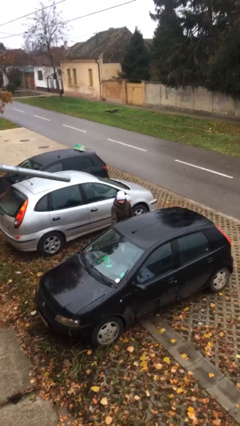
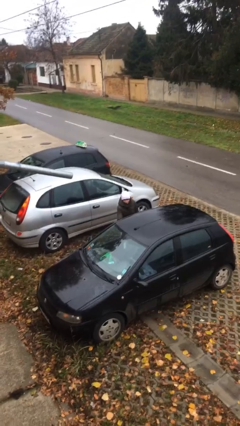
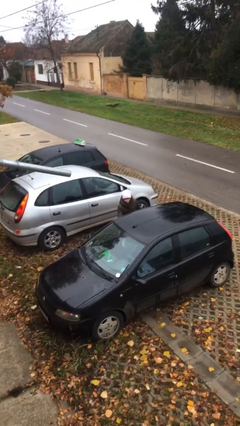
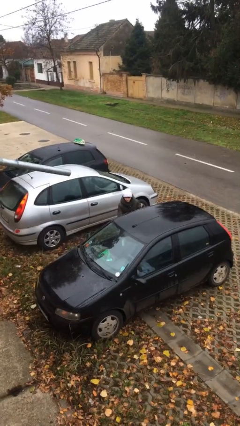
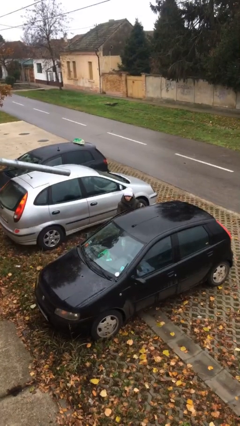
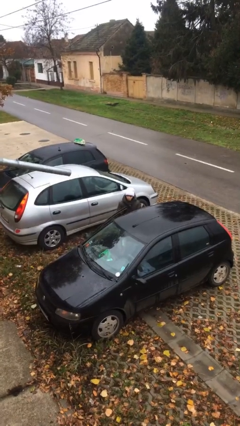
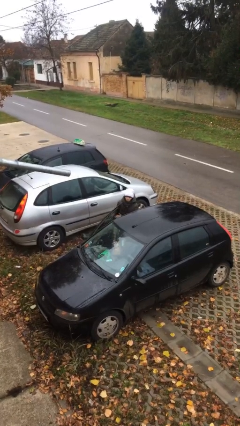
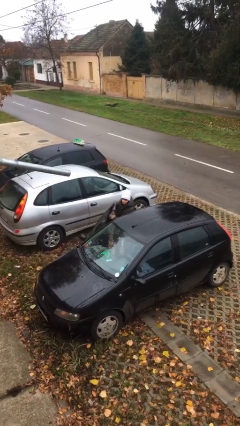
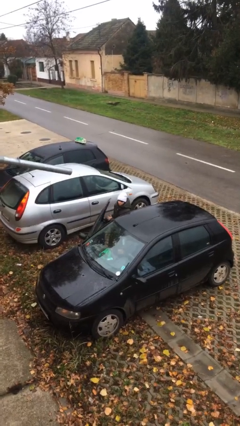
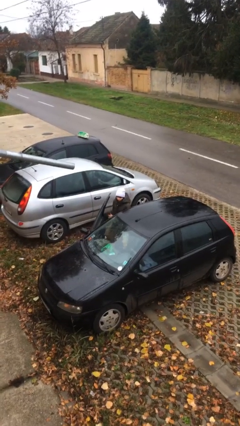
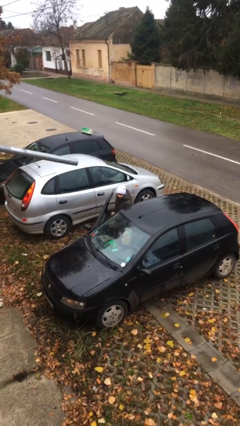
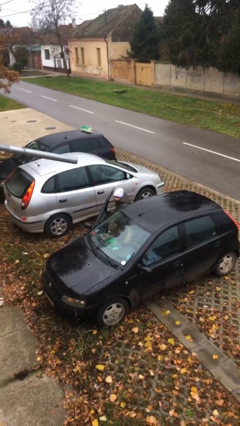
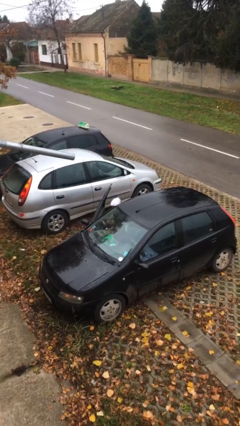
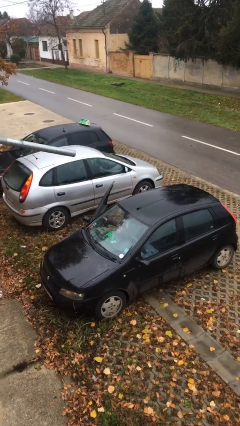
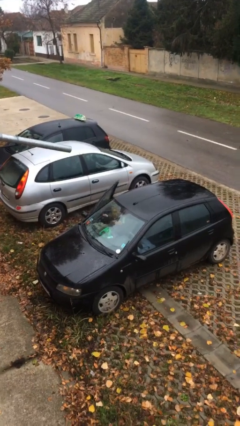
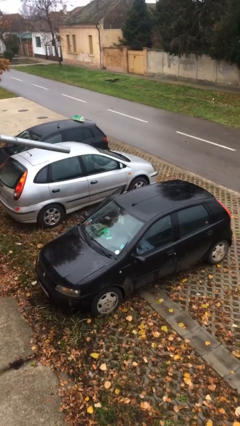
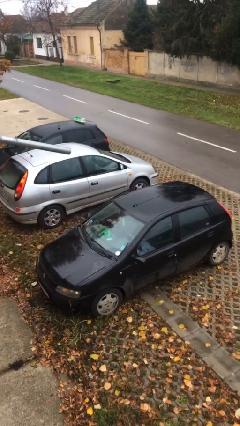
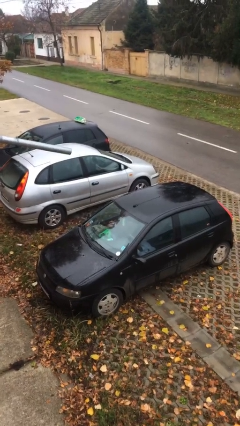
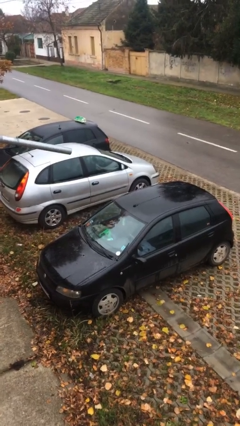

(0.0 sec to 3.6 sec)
person enters car

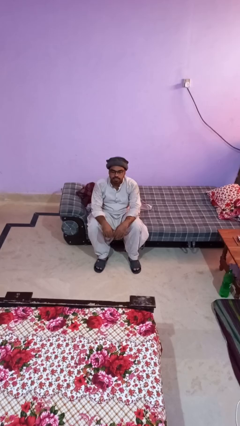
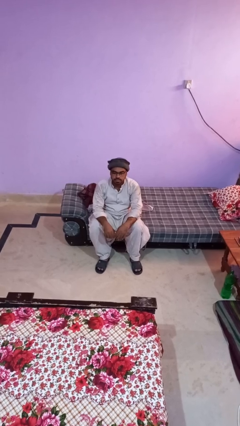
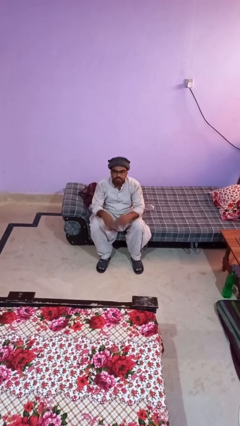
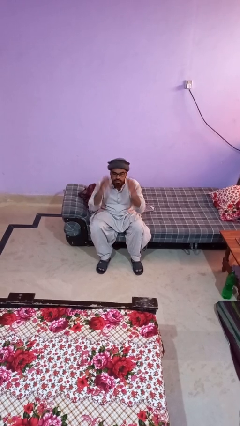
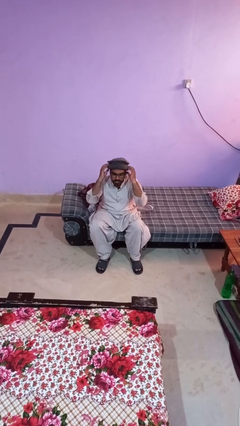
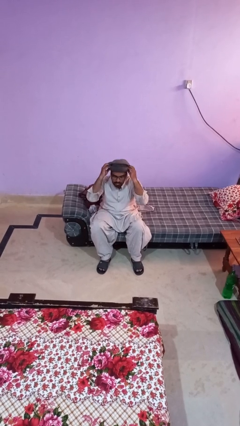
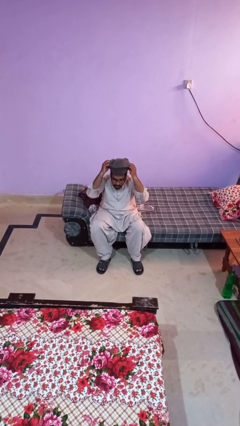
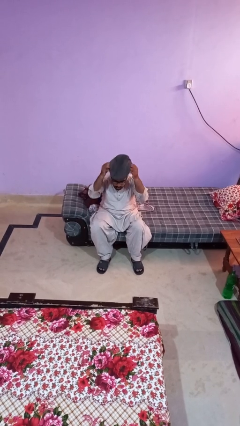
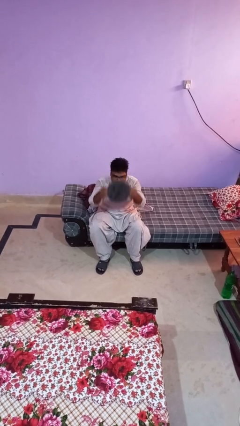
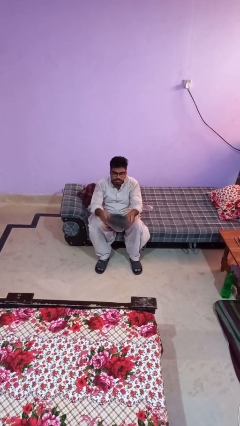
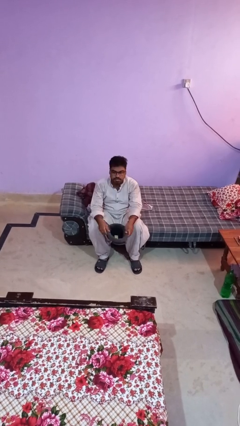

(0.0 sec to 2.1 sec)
person takes off hat

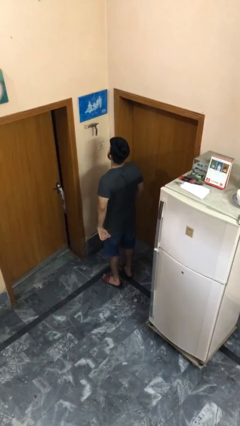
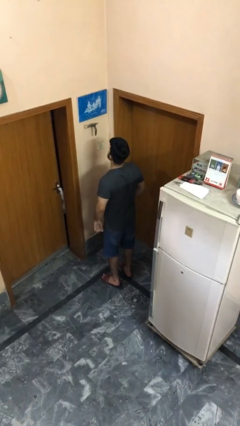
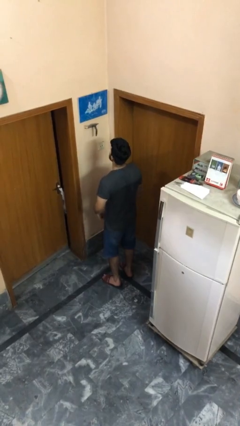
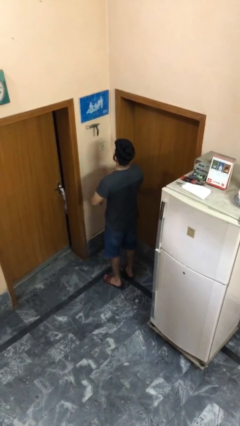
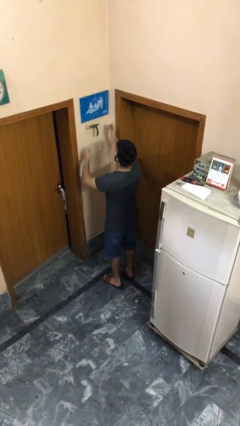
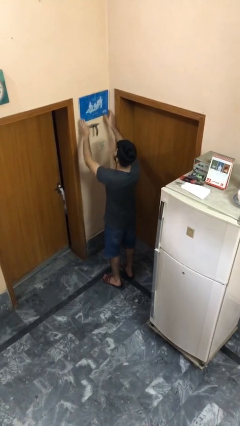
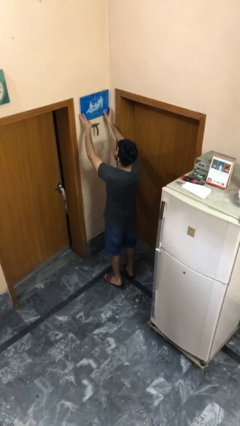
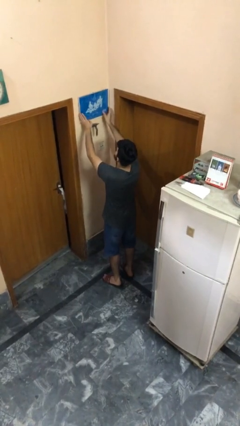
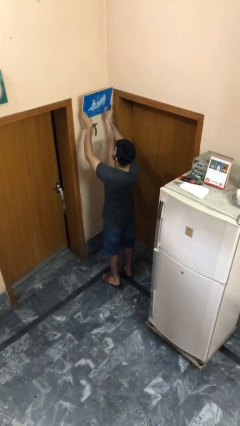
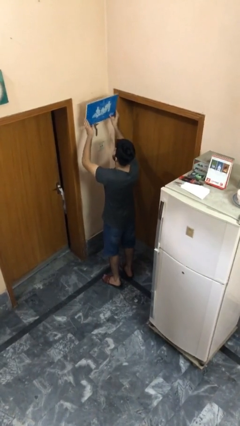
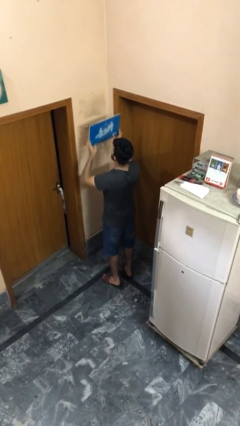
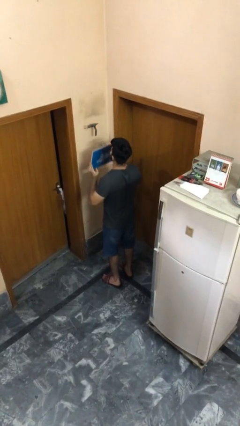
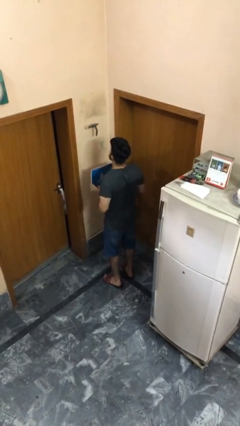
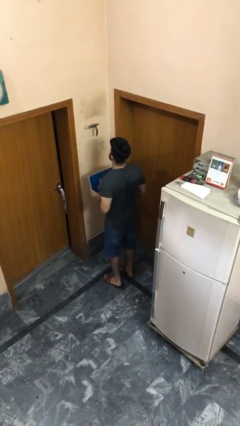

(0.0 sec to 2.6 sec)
person takes down picture frame

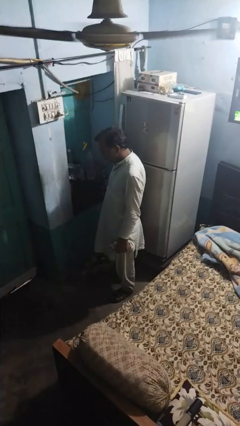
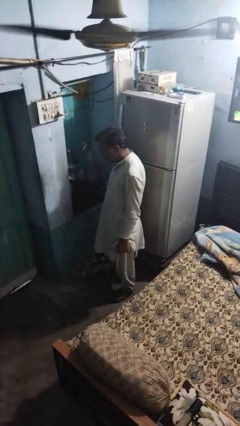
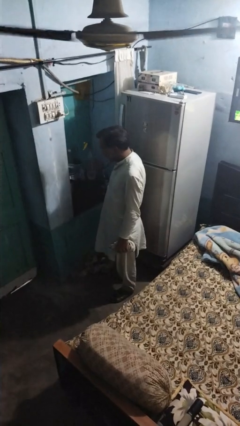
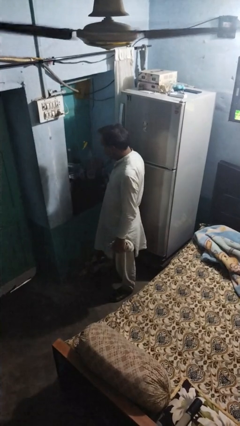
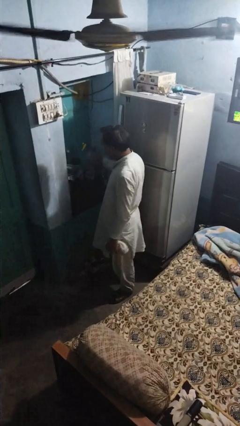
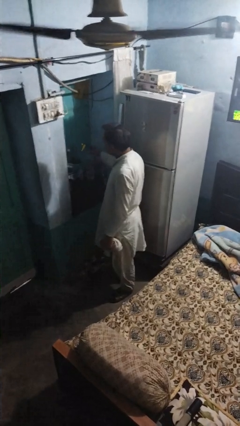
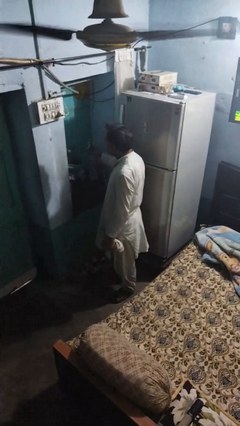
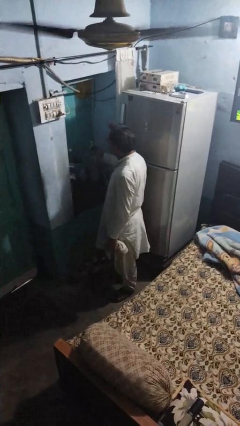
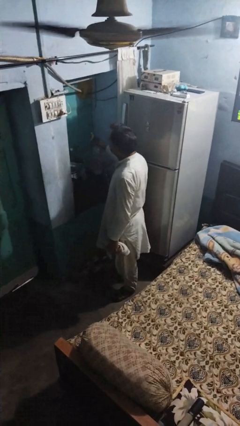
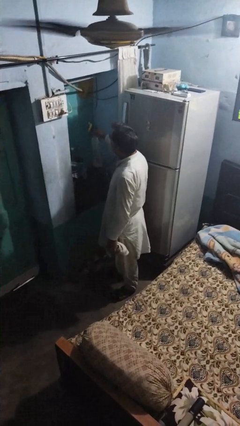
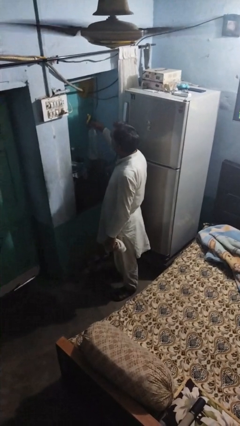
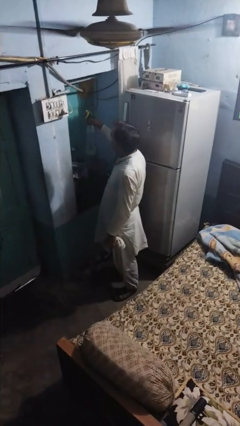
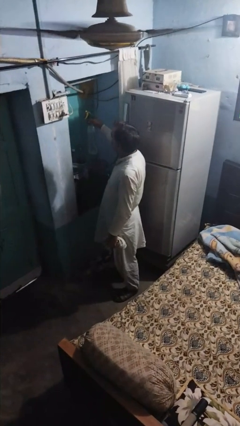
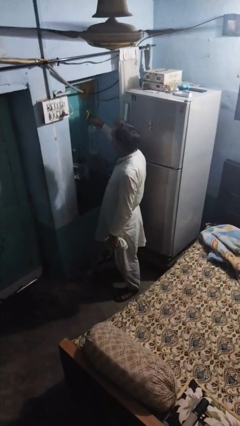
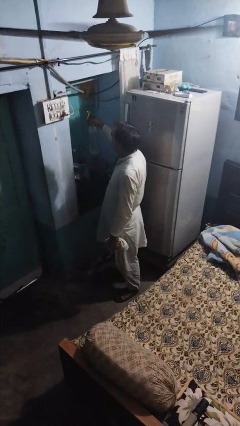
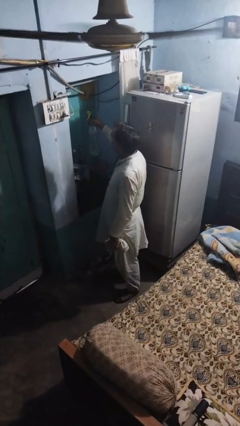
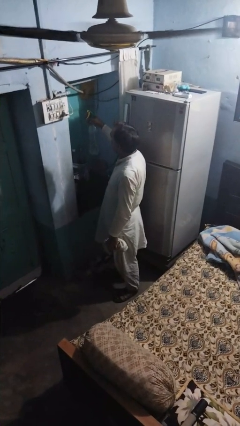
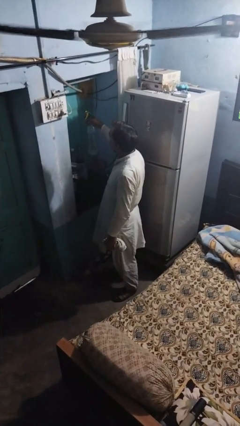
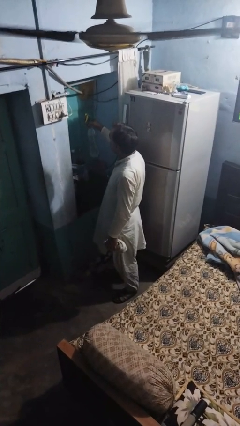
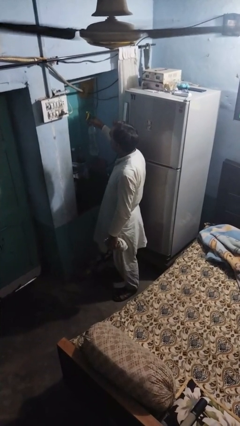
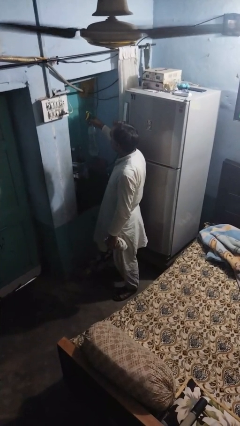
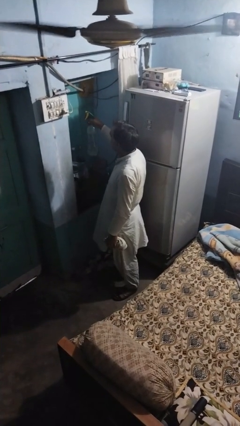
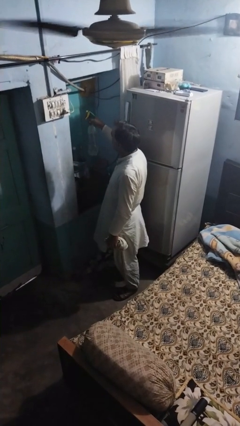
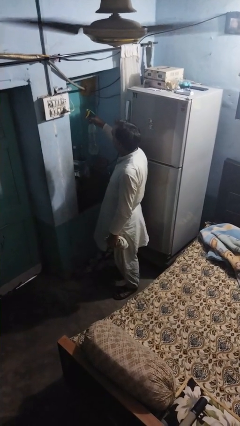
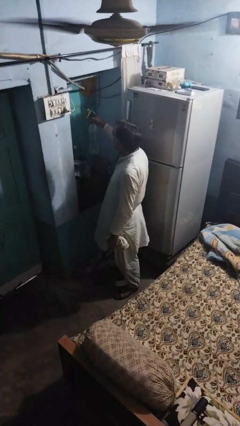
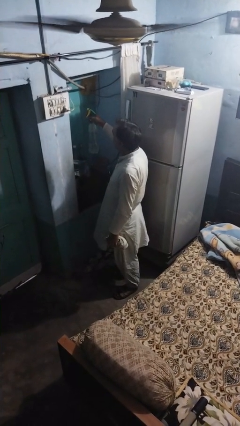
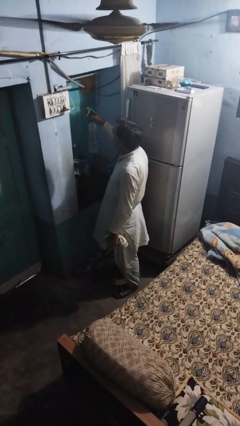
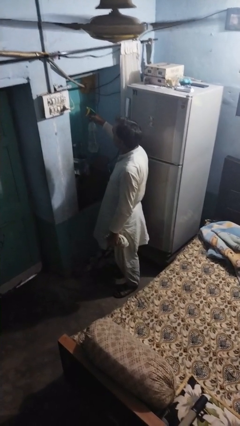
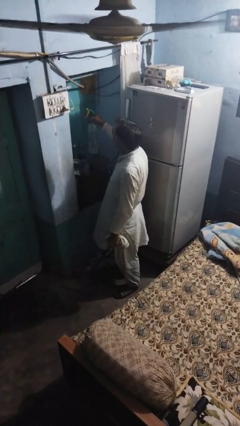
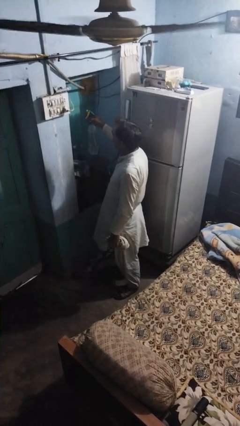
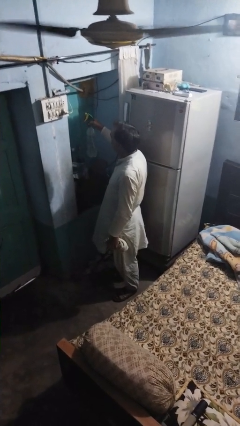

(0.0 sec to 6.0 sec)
person sprays from bottle

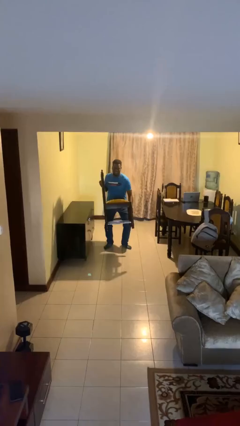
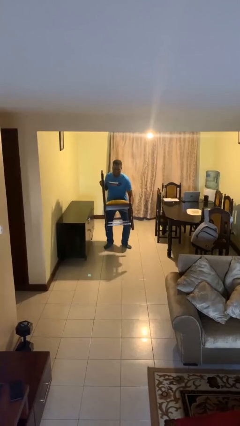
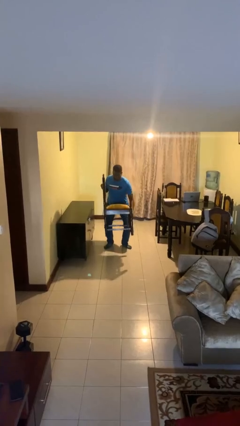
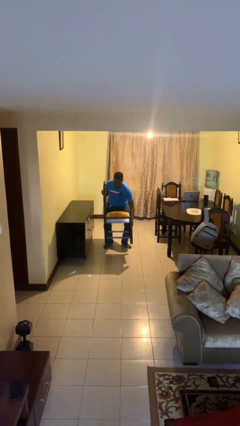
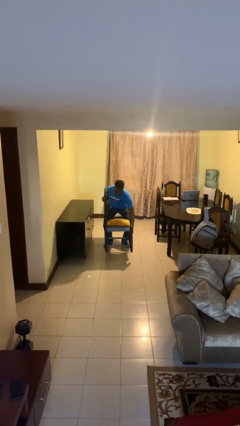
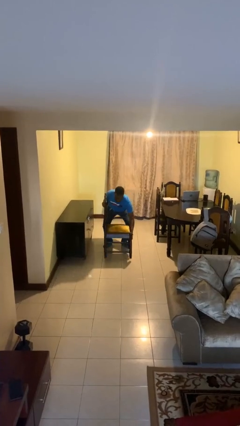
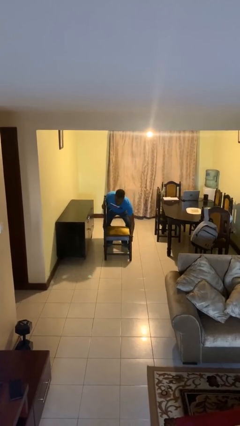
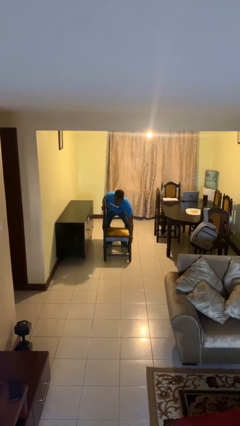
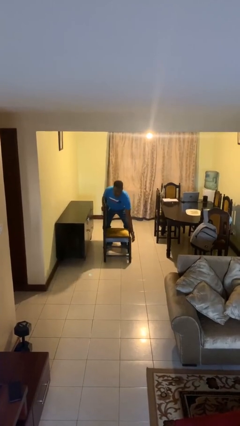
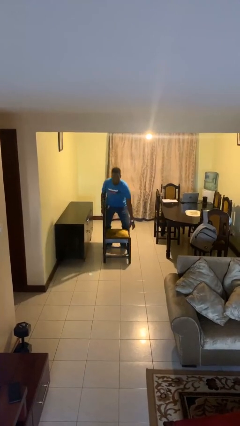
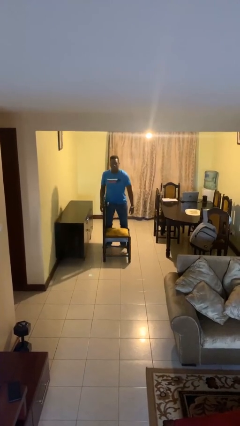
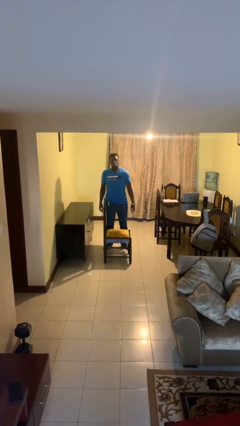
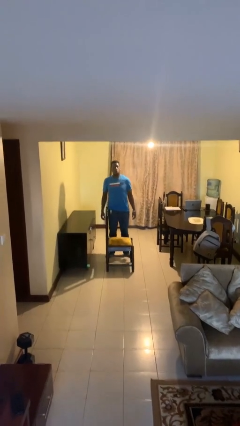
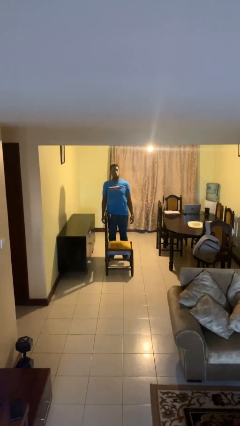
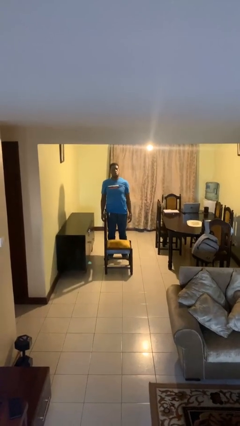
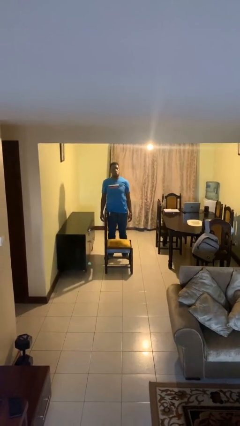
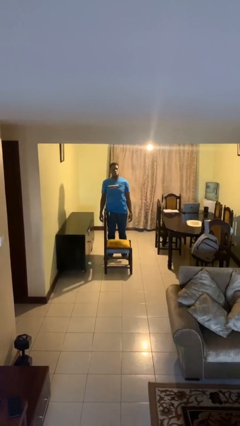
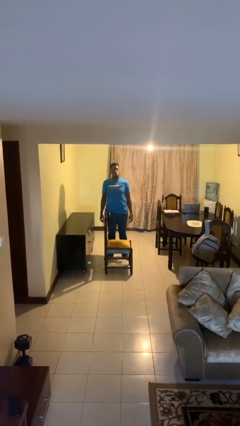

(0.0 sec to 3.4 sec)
person puts down object on floor
